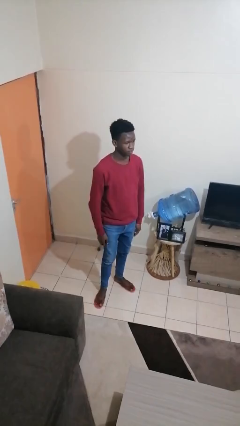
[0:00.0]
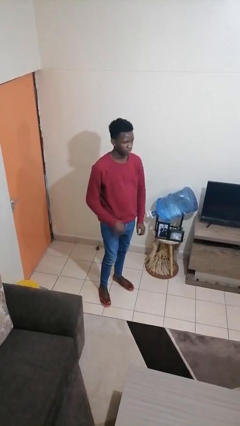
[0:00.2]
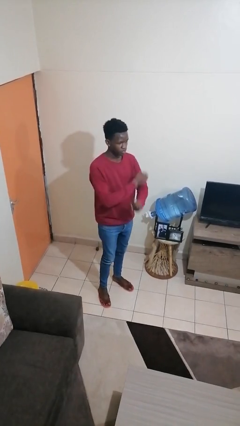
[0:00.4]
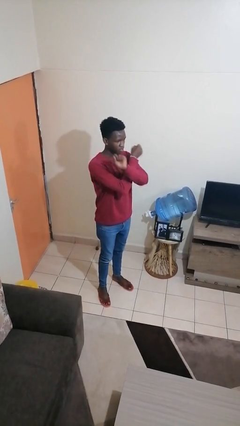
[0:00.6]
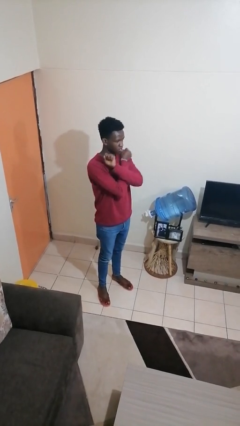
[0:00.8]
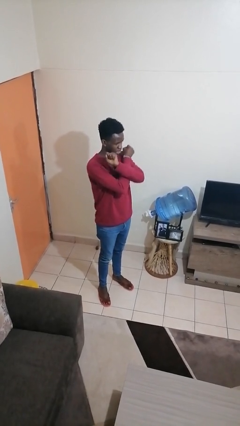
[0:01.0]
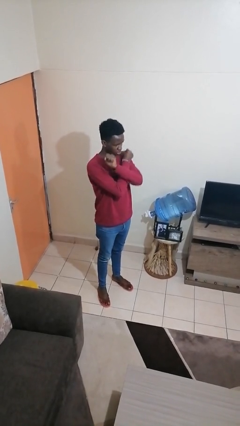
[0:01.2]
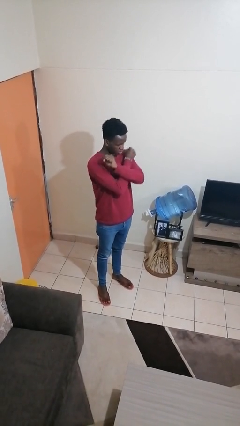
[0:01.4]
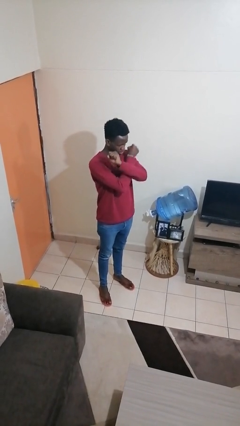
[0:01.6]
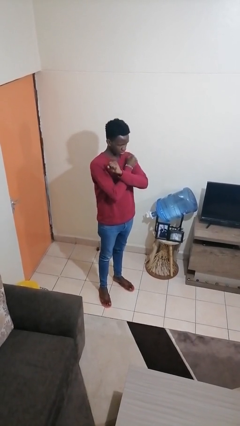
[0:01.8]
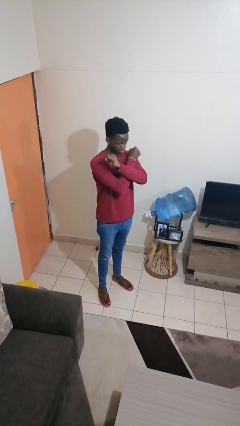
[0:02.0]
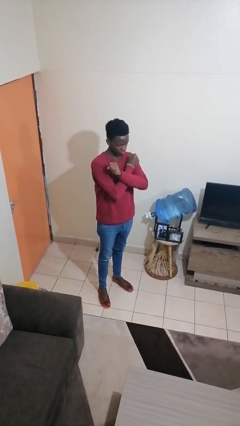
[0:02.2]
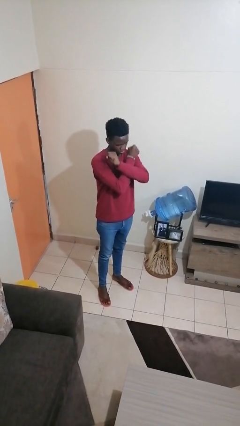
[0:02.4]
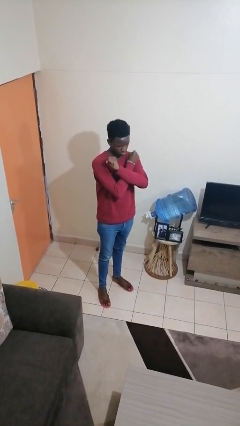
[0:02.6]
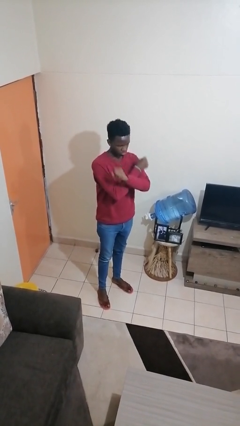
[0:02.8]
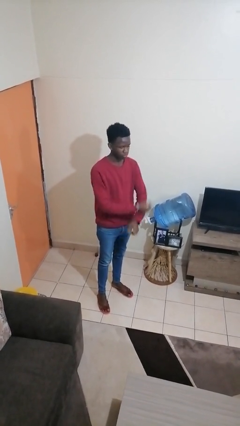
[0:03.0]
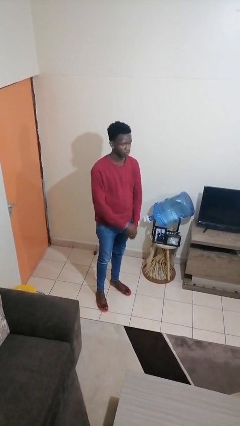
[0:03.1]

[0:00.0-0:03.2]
person gestures arms x

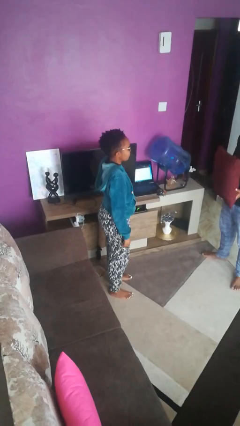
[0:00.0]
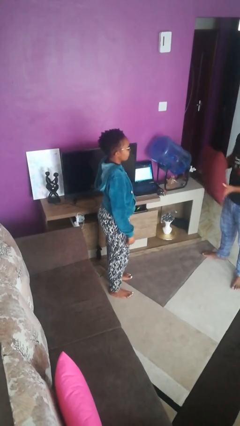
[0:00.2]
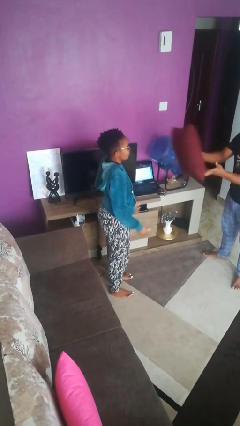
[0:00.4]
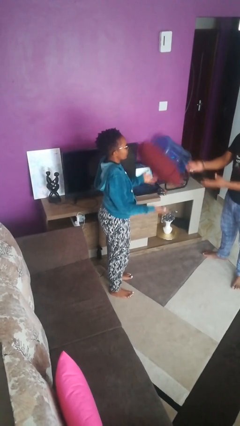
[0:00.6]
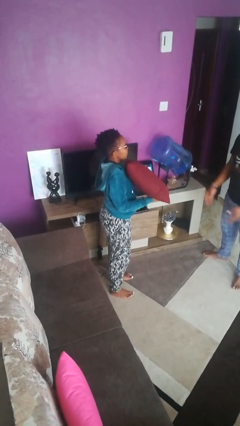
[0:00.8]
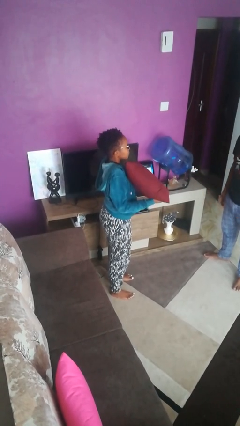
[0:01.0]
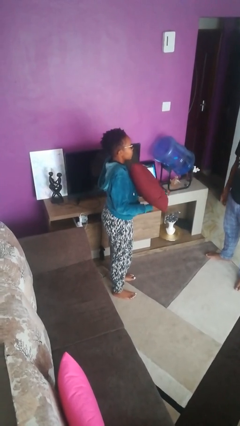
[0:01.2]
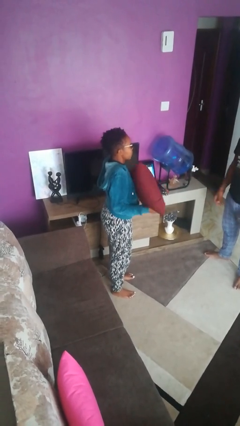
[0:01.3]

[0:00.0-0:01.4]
person catches object from person

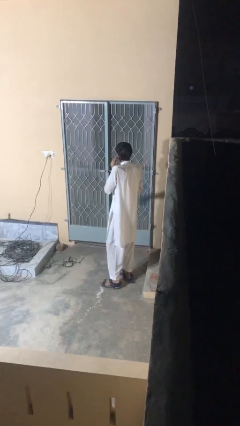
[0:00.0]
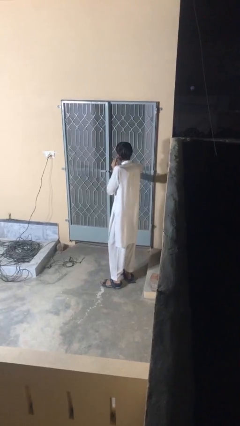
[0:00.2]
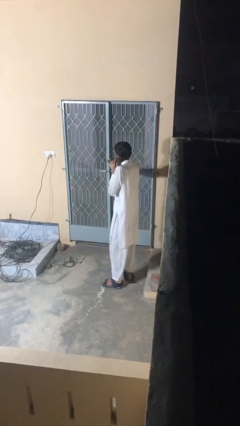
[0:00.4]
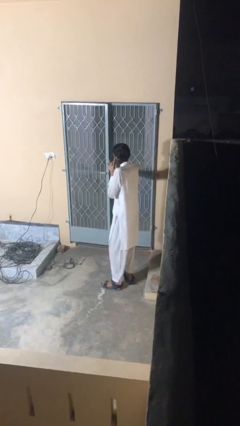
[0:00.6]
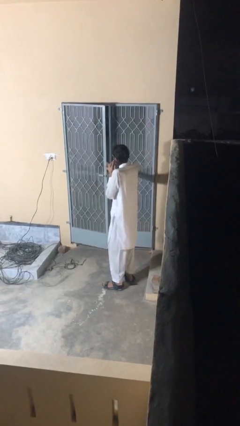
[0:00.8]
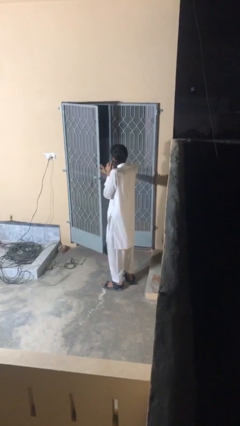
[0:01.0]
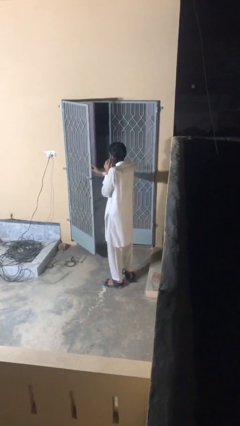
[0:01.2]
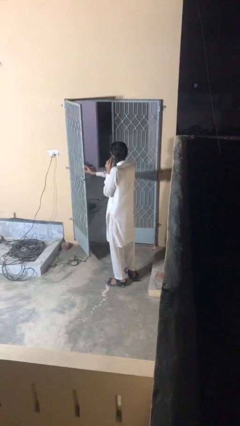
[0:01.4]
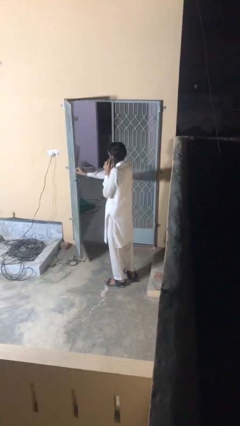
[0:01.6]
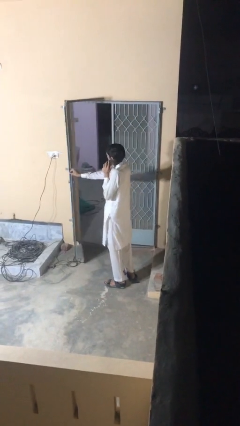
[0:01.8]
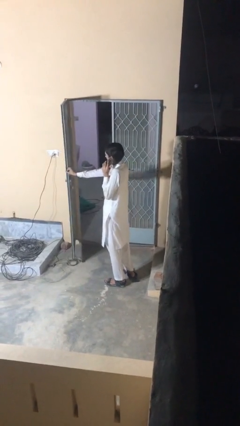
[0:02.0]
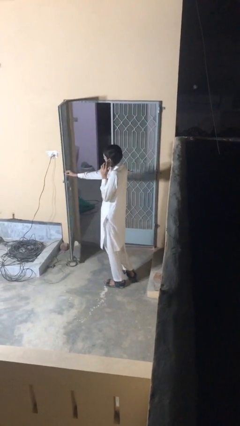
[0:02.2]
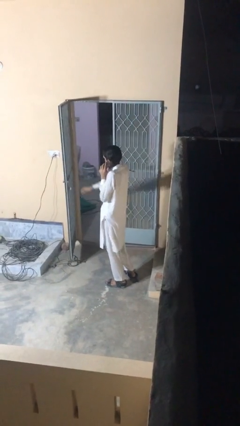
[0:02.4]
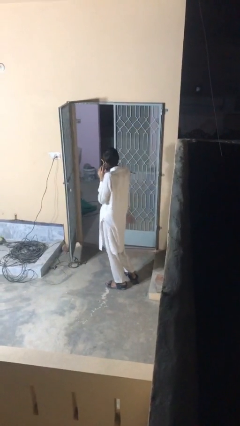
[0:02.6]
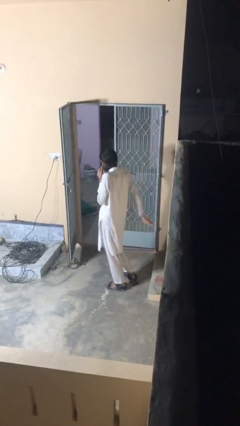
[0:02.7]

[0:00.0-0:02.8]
person opens facility door

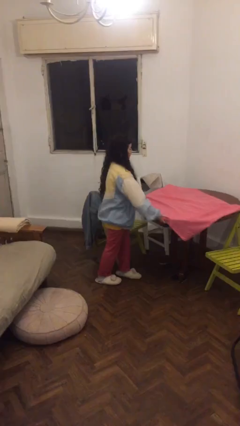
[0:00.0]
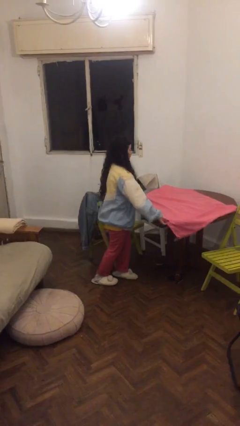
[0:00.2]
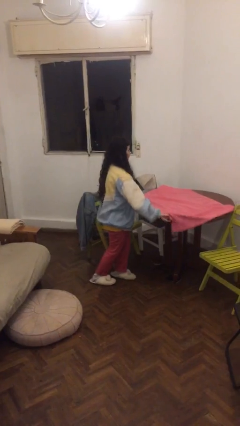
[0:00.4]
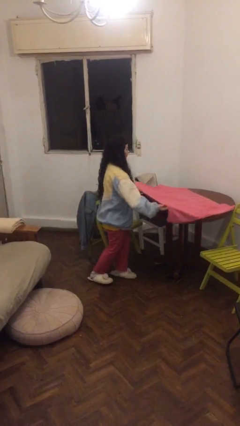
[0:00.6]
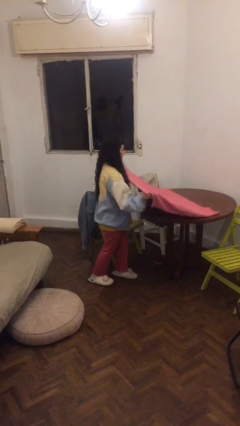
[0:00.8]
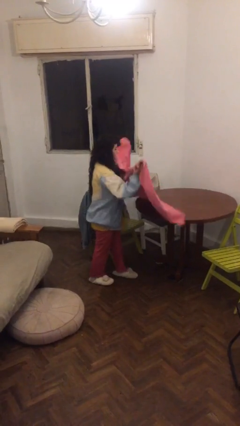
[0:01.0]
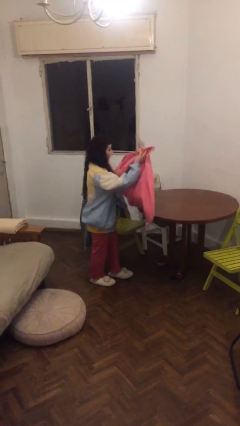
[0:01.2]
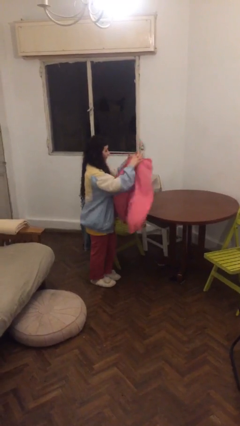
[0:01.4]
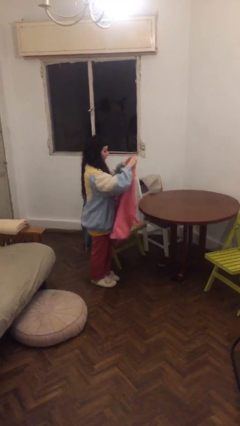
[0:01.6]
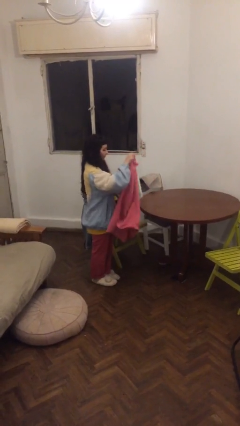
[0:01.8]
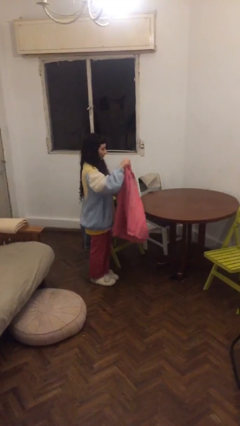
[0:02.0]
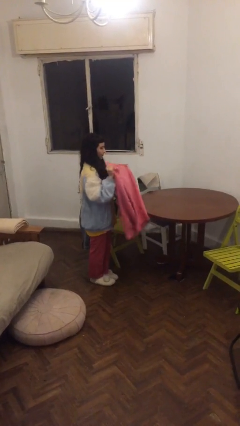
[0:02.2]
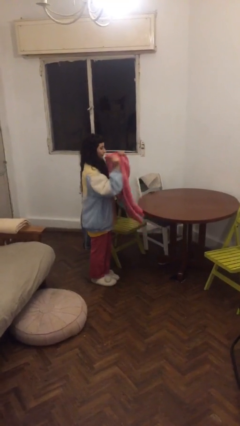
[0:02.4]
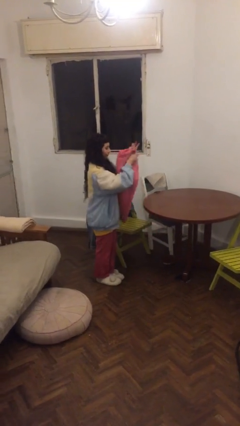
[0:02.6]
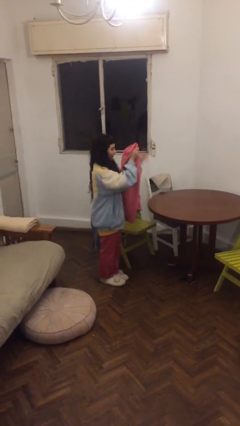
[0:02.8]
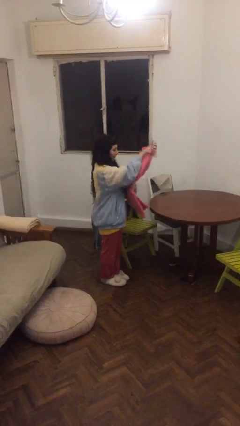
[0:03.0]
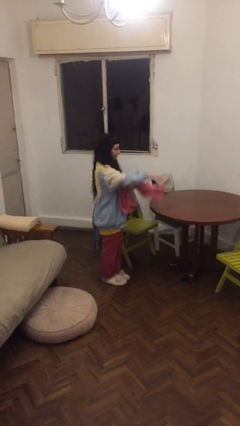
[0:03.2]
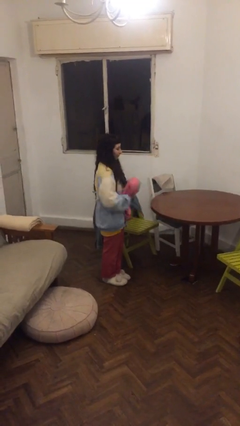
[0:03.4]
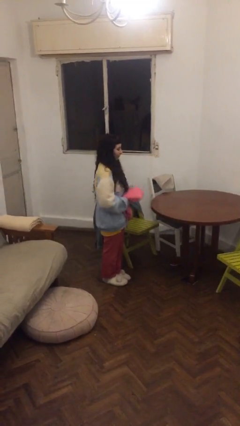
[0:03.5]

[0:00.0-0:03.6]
person folds tablecloth

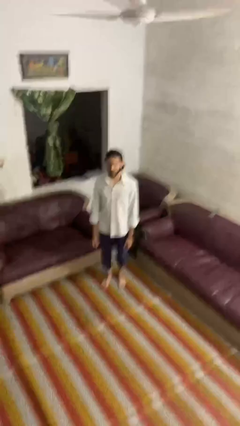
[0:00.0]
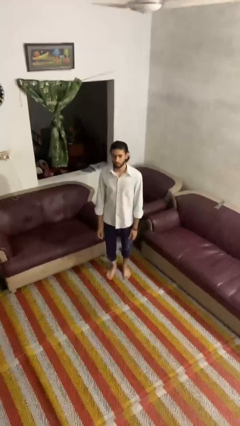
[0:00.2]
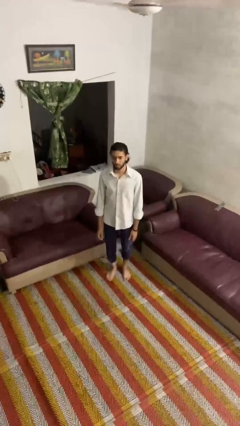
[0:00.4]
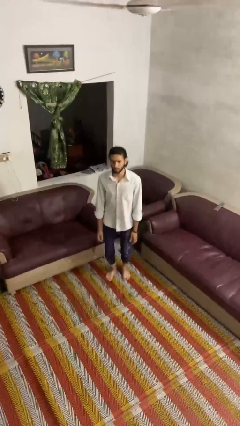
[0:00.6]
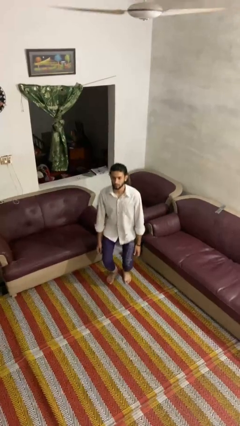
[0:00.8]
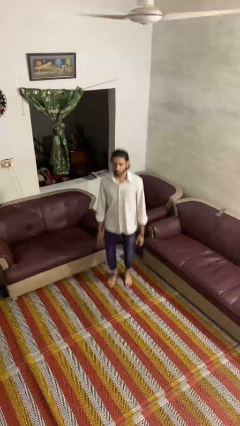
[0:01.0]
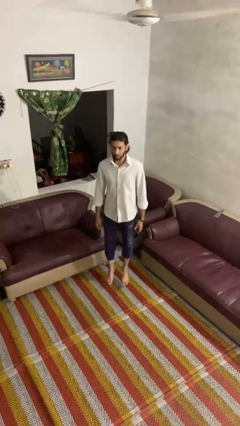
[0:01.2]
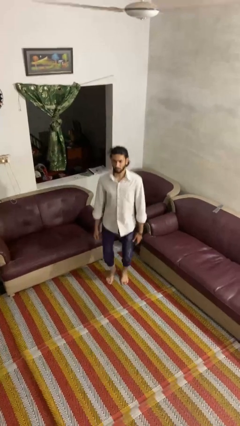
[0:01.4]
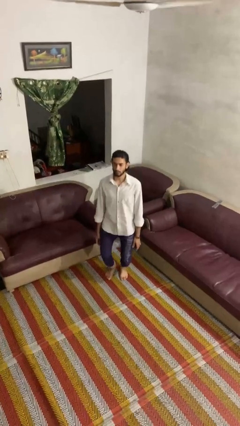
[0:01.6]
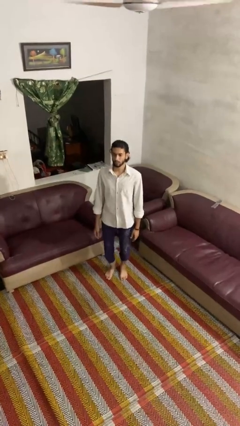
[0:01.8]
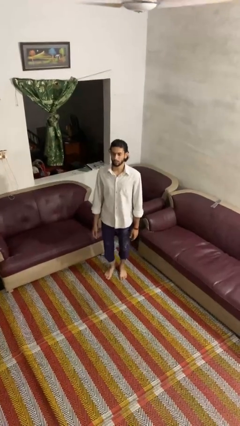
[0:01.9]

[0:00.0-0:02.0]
person jumps

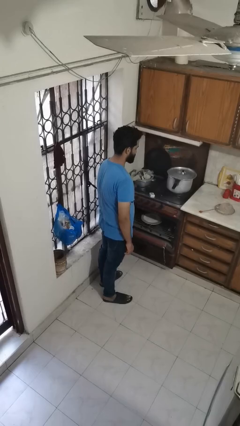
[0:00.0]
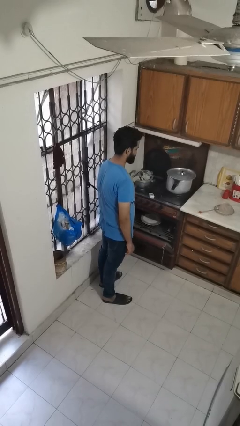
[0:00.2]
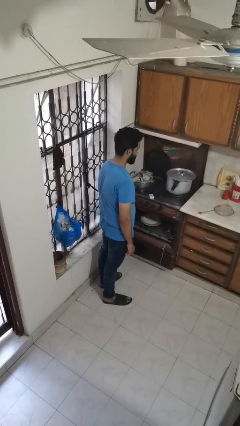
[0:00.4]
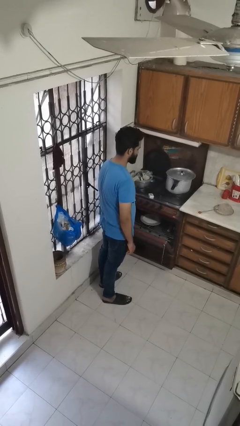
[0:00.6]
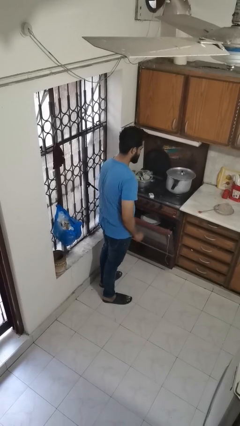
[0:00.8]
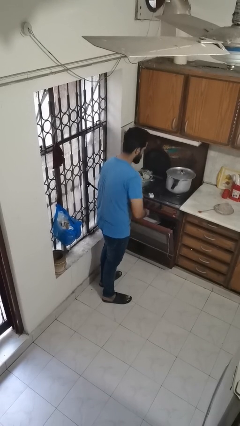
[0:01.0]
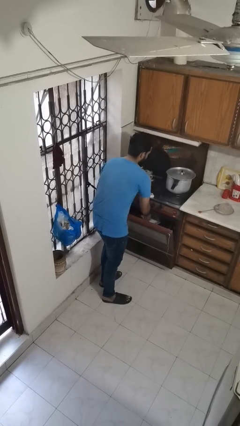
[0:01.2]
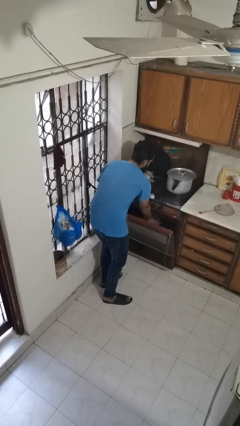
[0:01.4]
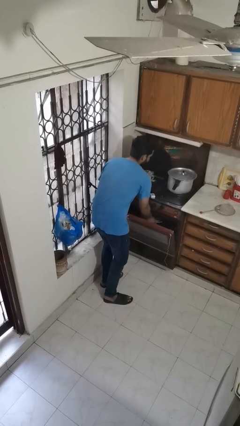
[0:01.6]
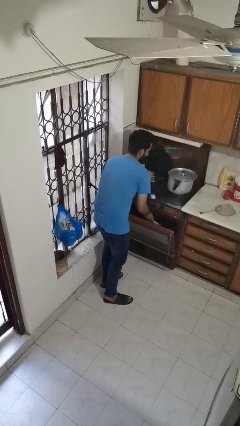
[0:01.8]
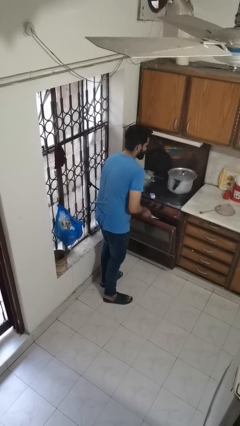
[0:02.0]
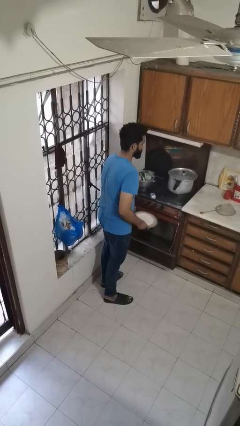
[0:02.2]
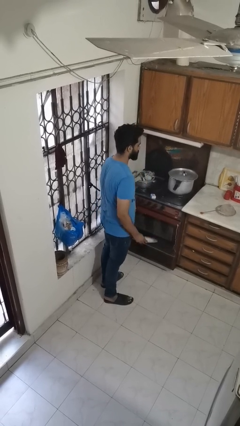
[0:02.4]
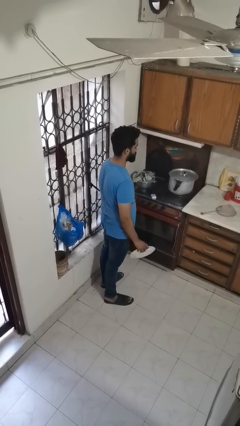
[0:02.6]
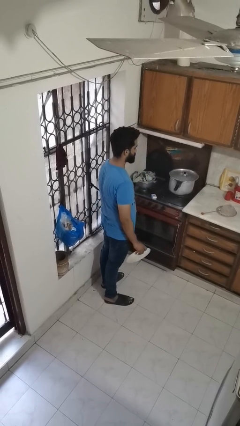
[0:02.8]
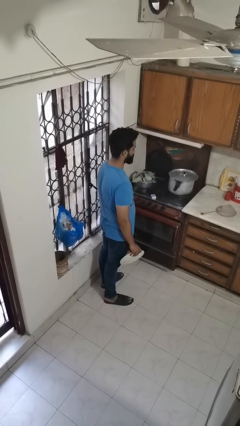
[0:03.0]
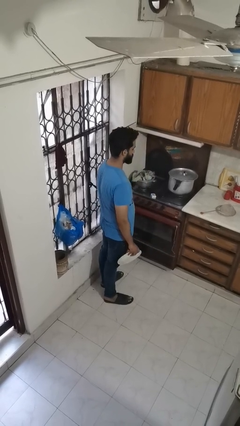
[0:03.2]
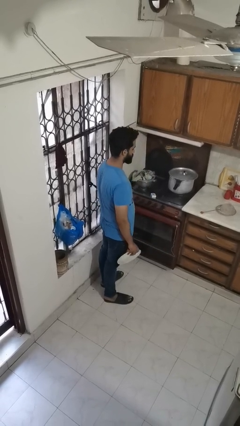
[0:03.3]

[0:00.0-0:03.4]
person takes object from oven

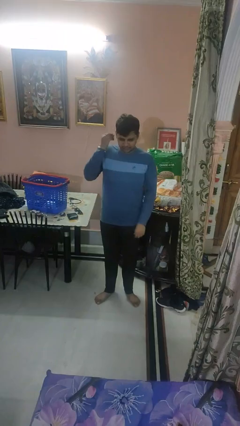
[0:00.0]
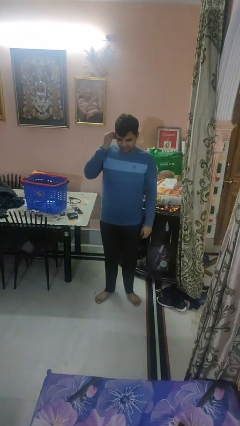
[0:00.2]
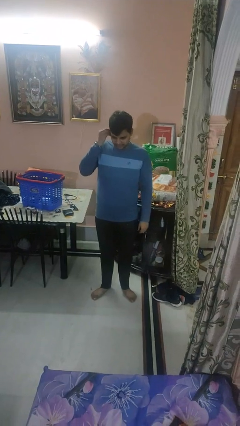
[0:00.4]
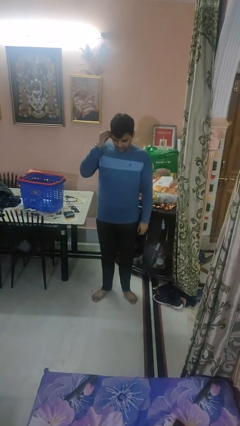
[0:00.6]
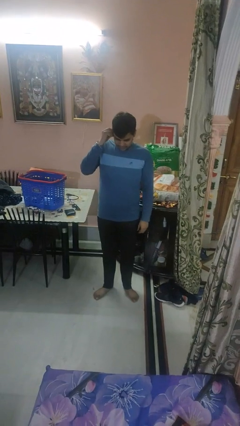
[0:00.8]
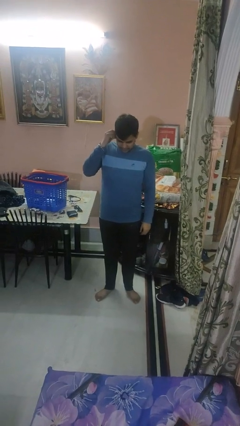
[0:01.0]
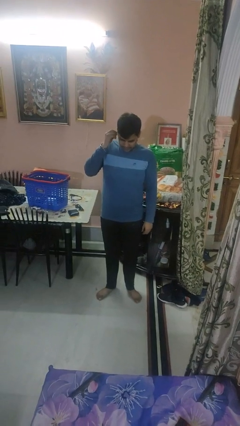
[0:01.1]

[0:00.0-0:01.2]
person puts on earrings
